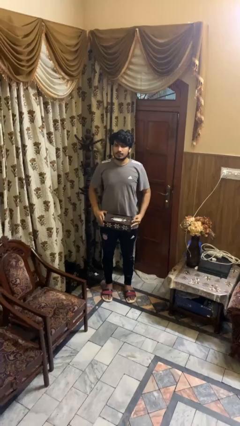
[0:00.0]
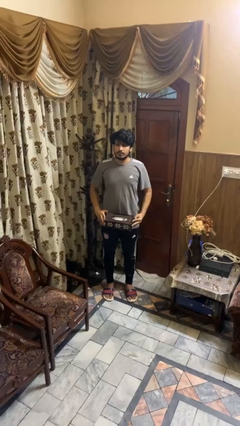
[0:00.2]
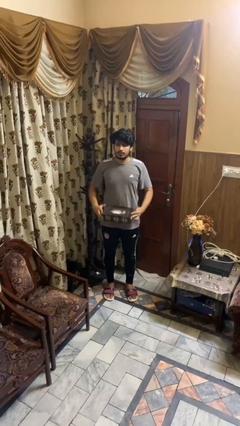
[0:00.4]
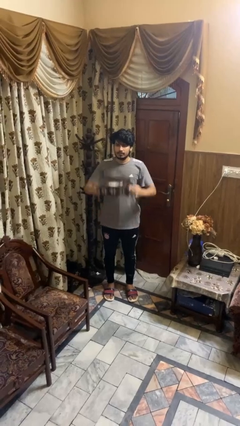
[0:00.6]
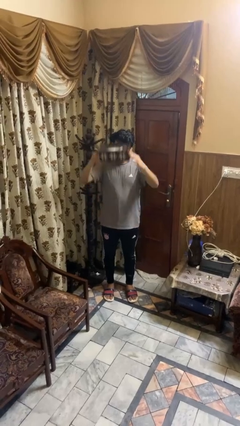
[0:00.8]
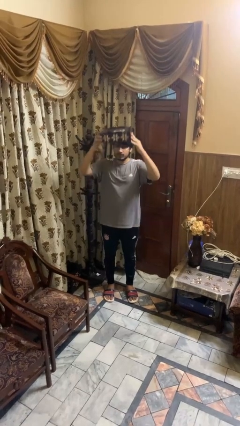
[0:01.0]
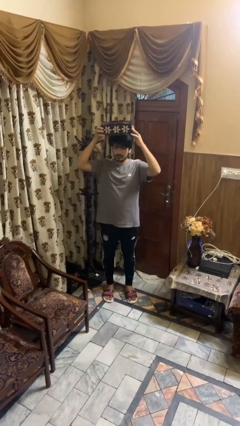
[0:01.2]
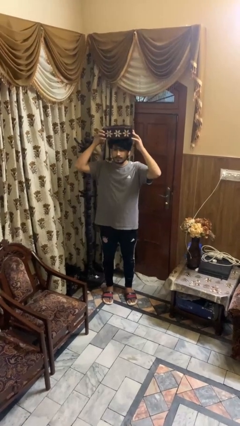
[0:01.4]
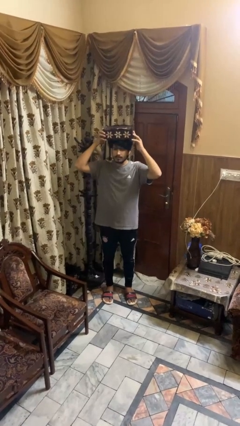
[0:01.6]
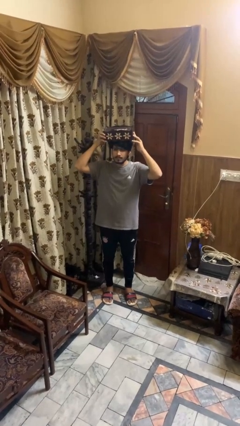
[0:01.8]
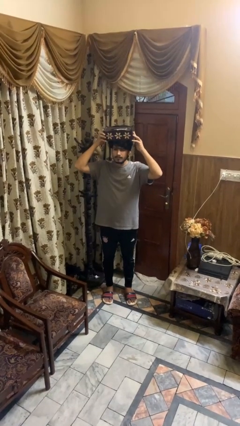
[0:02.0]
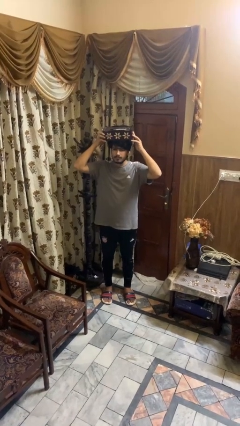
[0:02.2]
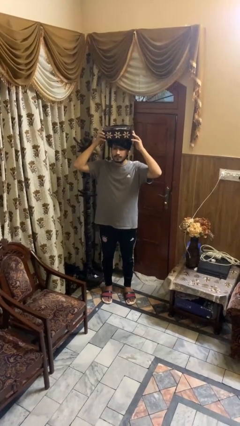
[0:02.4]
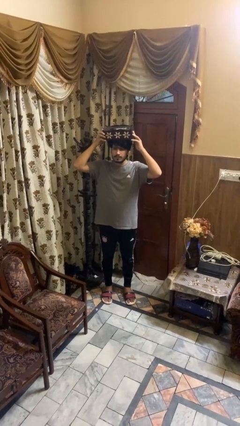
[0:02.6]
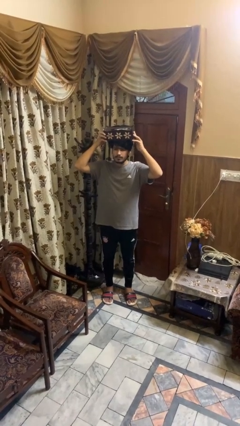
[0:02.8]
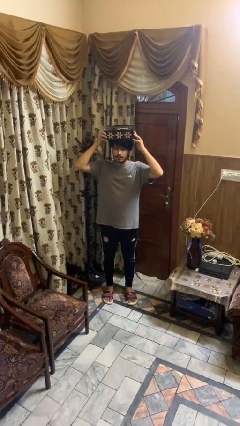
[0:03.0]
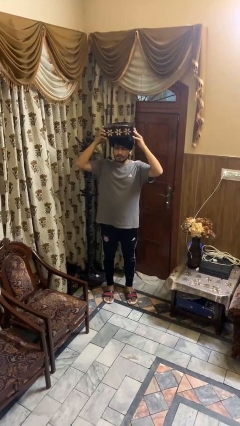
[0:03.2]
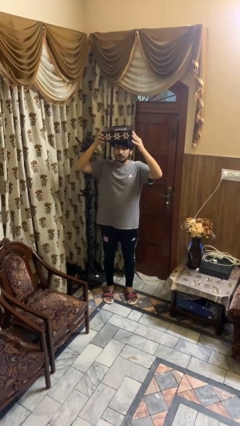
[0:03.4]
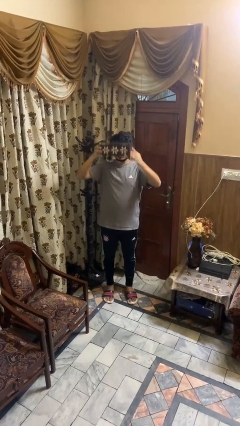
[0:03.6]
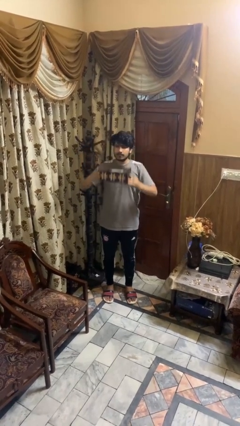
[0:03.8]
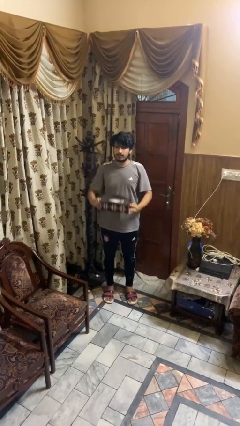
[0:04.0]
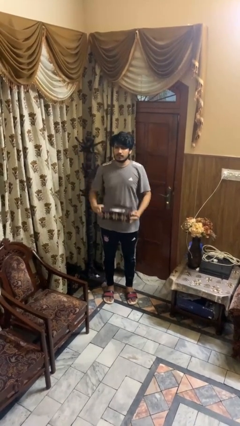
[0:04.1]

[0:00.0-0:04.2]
person holds object above head

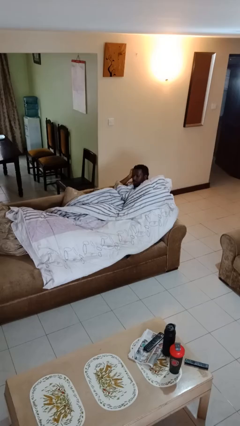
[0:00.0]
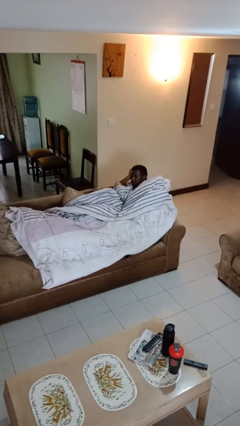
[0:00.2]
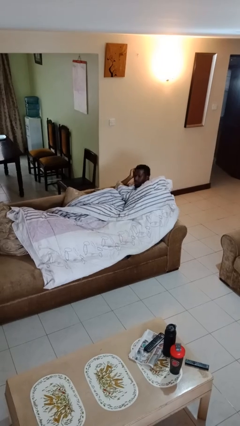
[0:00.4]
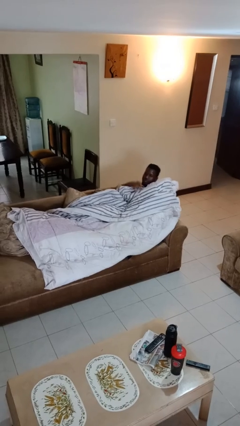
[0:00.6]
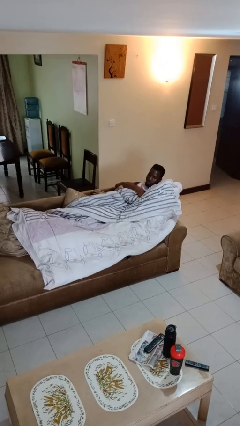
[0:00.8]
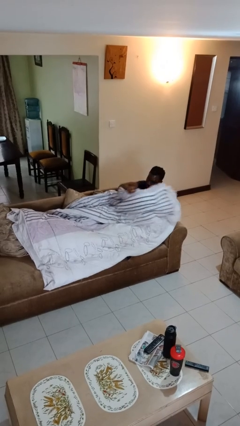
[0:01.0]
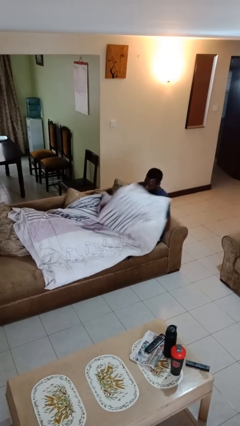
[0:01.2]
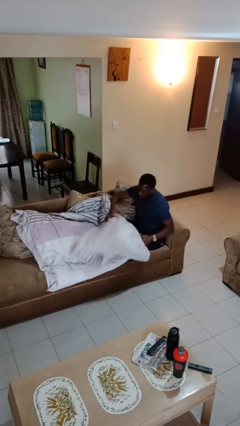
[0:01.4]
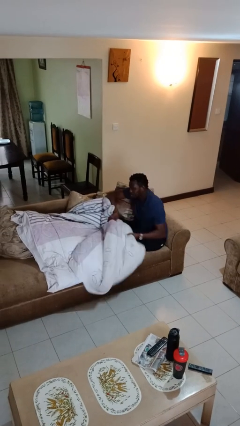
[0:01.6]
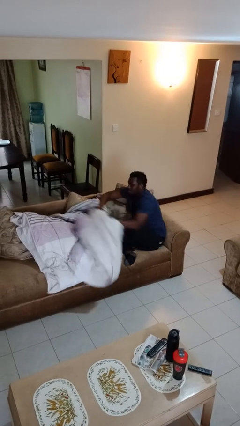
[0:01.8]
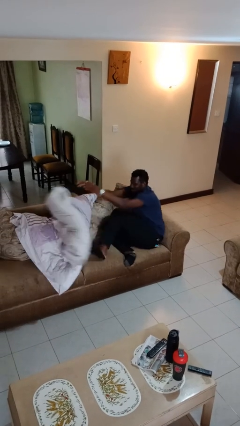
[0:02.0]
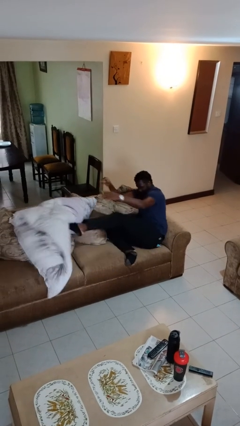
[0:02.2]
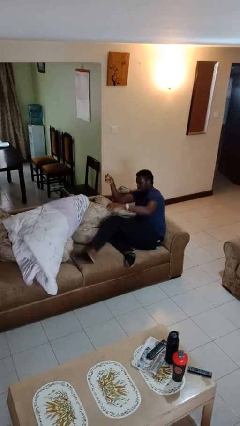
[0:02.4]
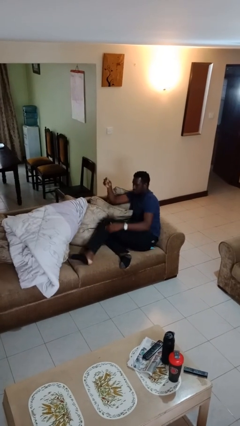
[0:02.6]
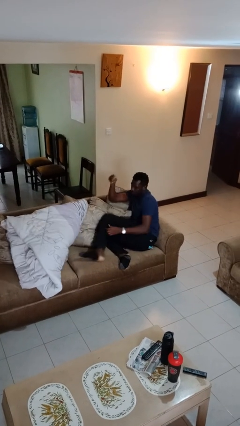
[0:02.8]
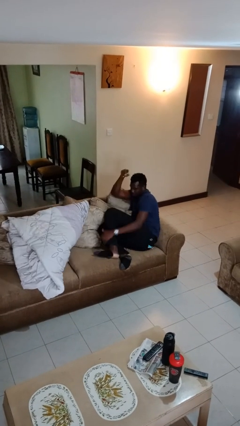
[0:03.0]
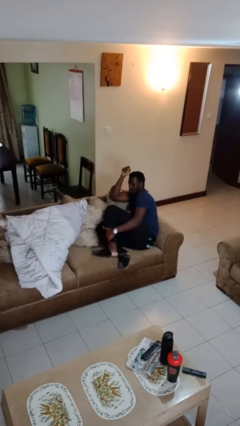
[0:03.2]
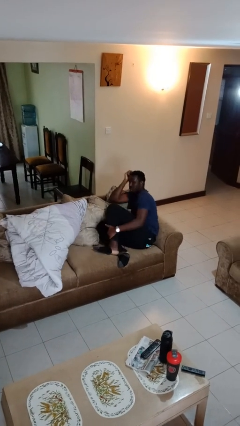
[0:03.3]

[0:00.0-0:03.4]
person uncovers with blanket

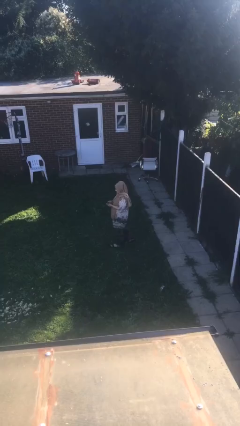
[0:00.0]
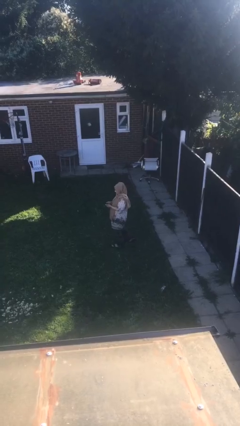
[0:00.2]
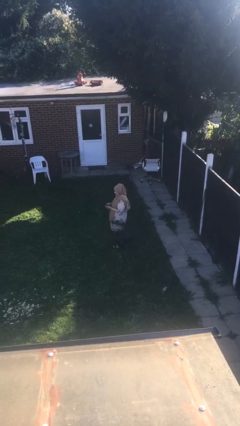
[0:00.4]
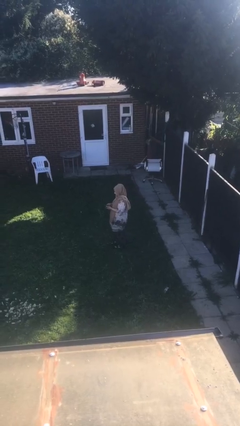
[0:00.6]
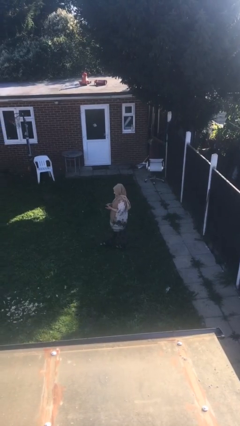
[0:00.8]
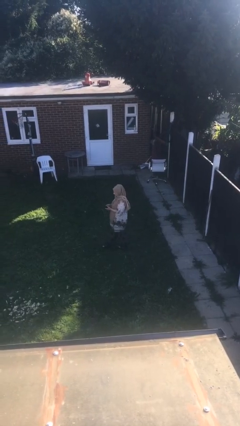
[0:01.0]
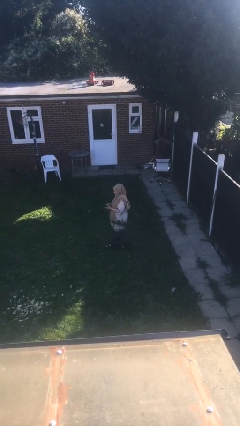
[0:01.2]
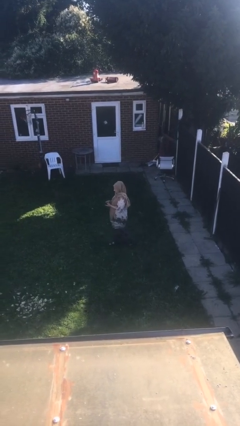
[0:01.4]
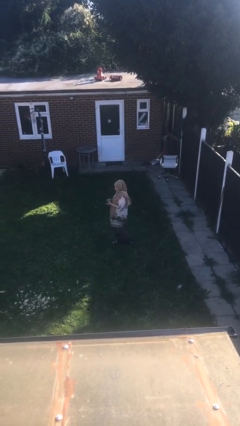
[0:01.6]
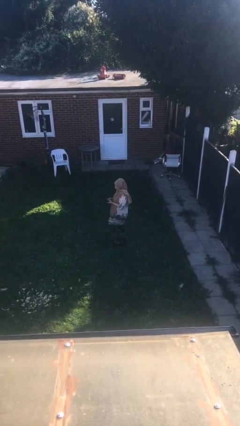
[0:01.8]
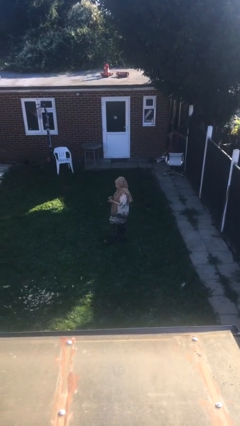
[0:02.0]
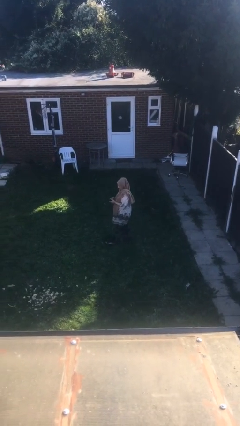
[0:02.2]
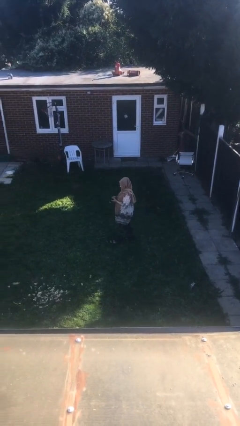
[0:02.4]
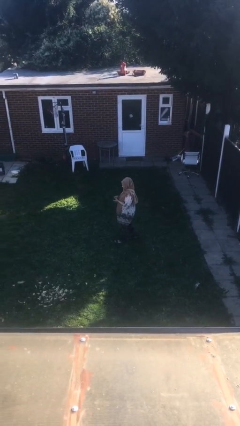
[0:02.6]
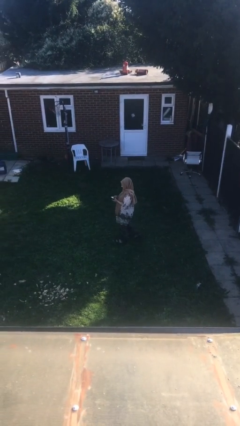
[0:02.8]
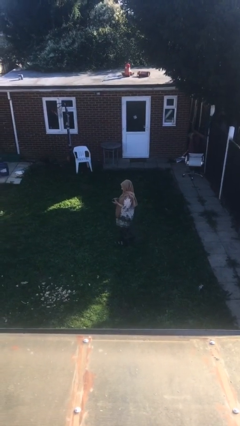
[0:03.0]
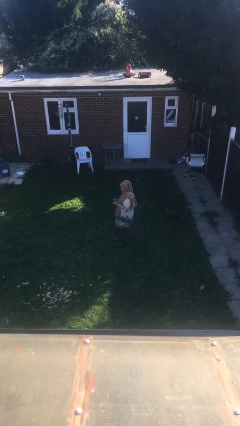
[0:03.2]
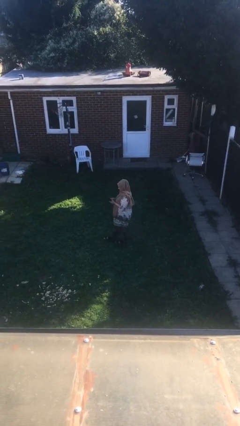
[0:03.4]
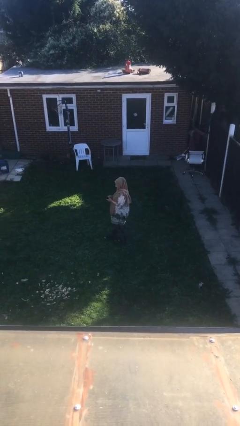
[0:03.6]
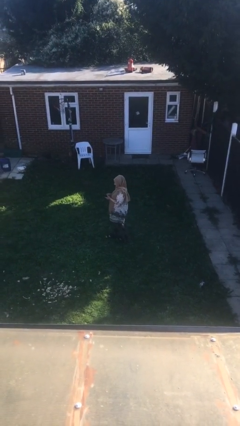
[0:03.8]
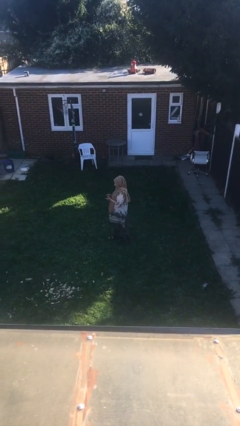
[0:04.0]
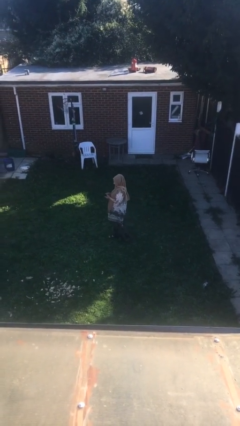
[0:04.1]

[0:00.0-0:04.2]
person texts on phone

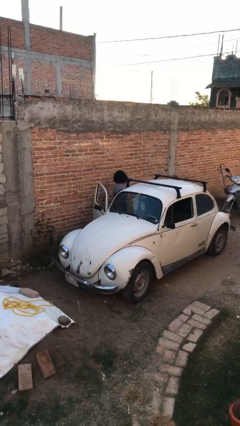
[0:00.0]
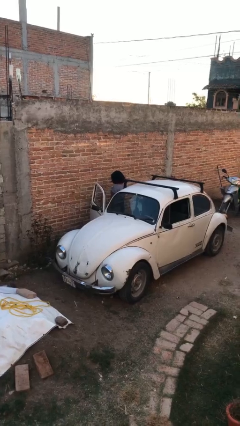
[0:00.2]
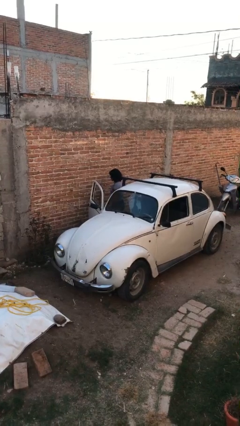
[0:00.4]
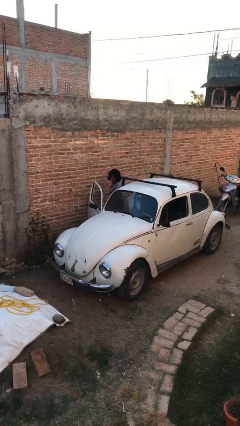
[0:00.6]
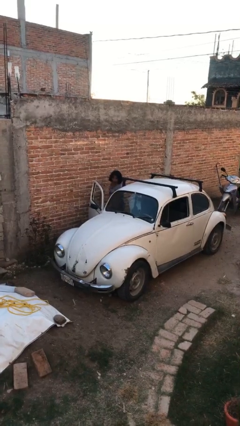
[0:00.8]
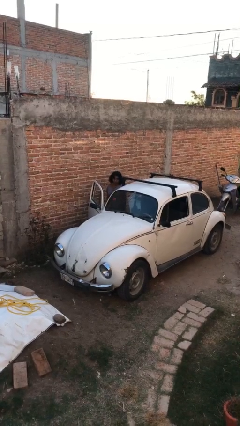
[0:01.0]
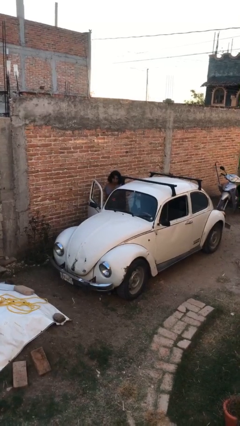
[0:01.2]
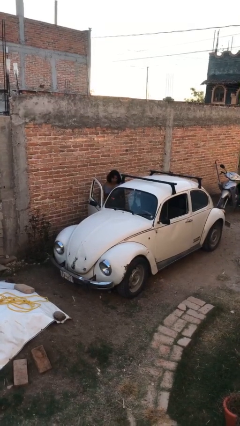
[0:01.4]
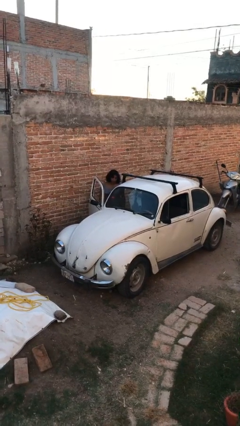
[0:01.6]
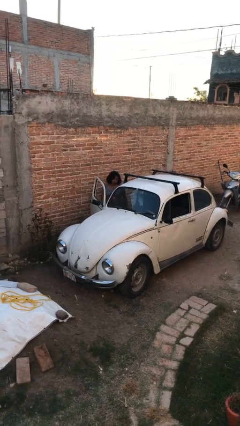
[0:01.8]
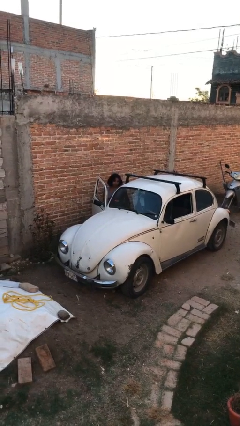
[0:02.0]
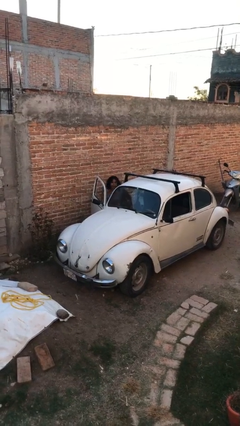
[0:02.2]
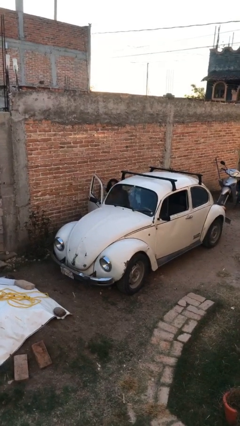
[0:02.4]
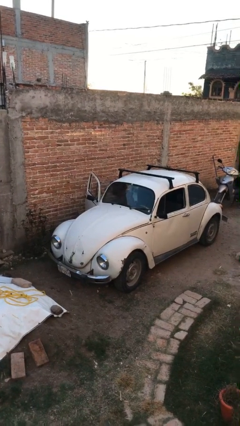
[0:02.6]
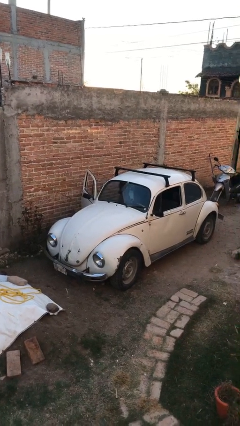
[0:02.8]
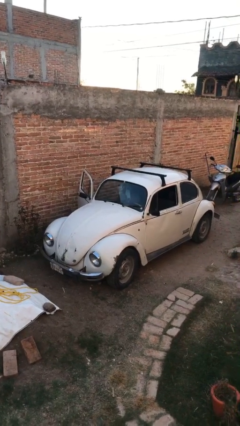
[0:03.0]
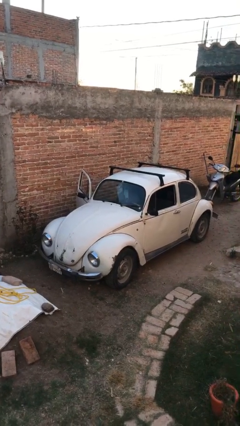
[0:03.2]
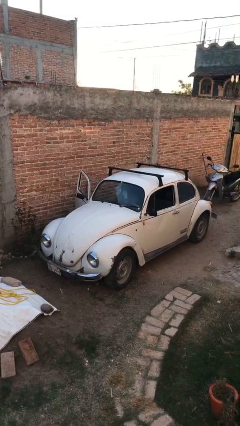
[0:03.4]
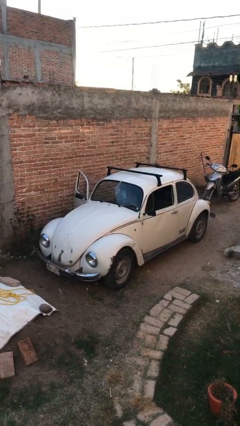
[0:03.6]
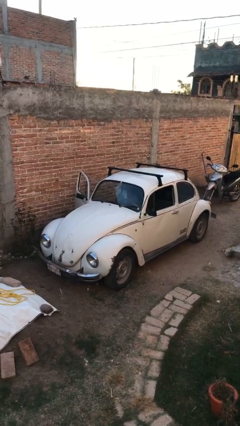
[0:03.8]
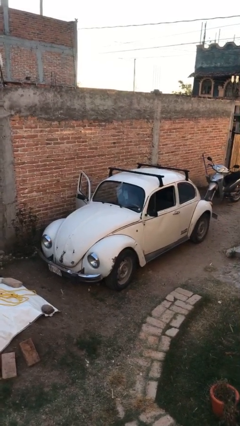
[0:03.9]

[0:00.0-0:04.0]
person enters car

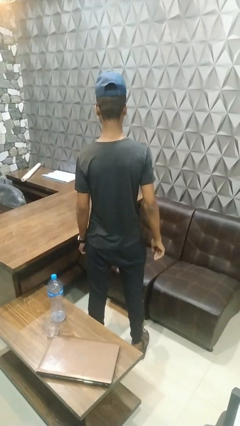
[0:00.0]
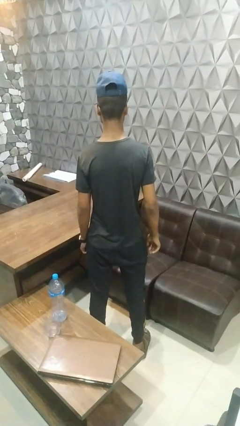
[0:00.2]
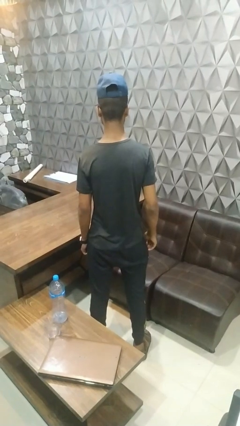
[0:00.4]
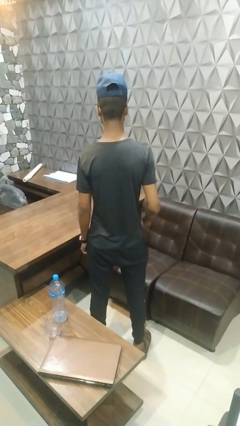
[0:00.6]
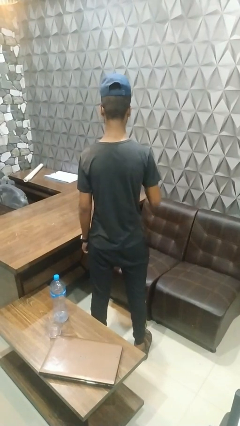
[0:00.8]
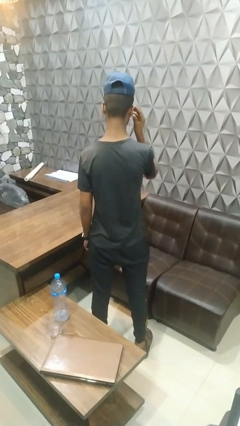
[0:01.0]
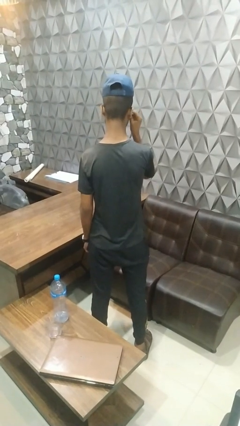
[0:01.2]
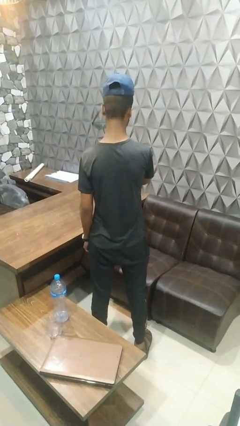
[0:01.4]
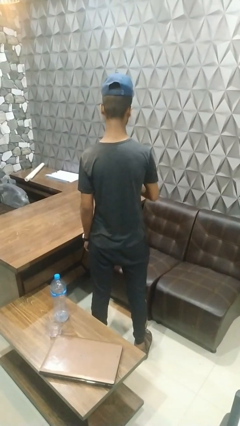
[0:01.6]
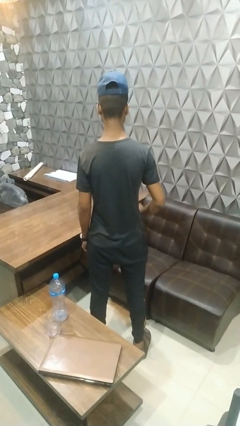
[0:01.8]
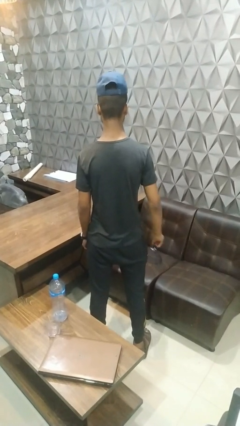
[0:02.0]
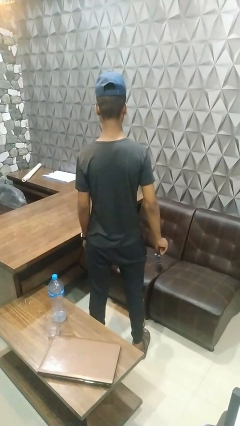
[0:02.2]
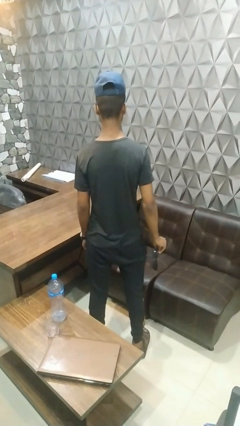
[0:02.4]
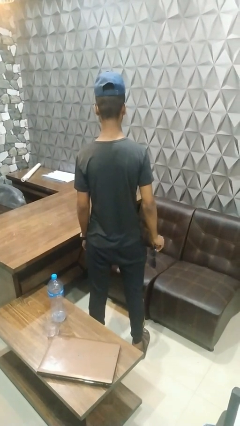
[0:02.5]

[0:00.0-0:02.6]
person takes off sunglasses
